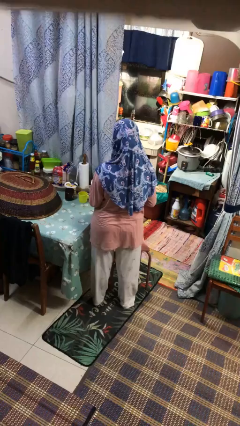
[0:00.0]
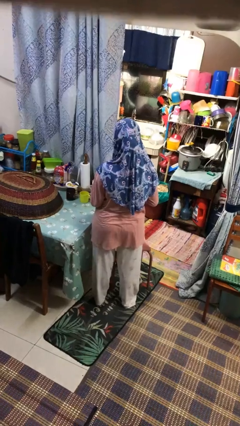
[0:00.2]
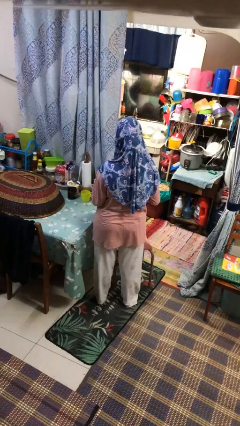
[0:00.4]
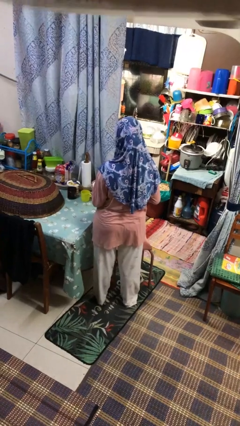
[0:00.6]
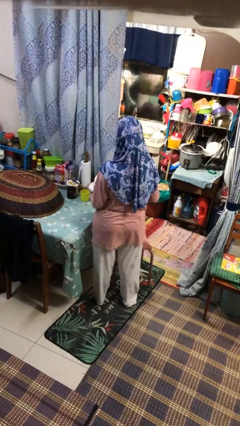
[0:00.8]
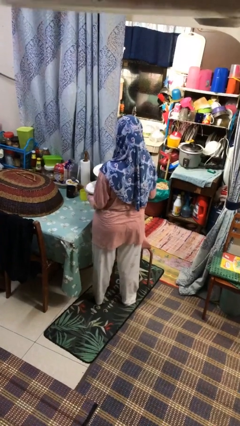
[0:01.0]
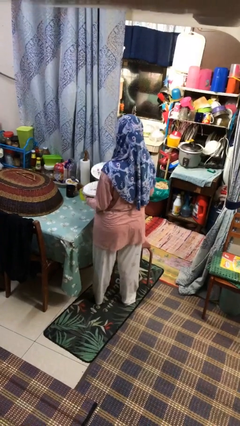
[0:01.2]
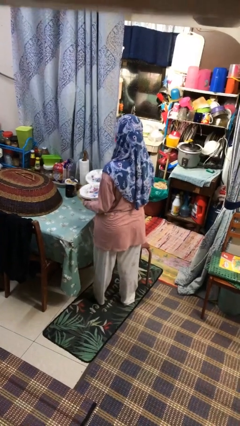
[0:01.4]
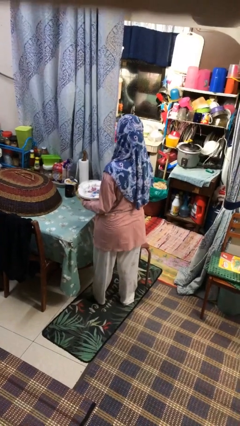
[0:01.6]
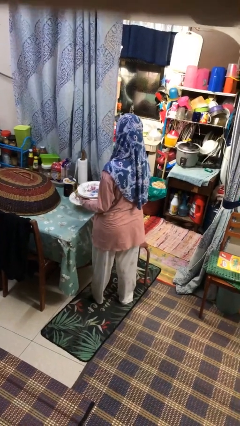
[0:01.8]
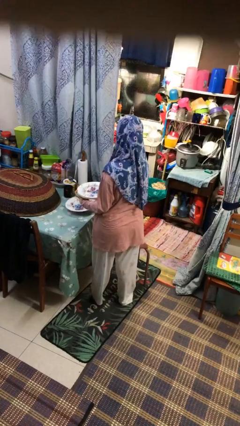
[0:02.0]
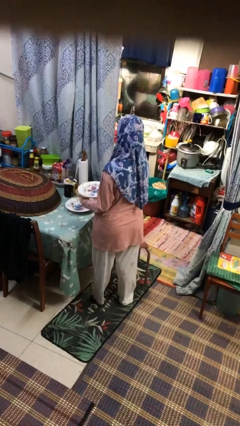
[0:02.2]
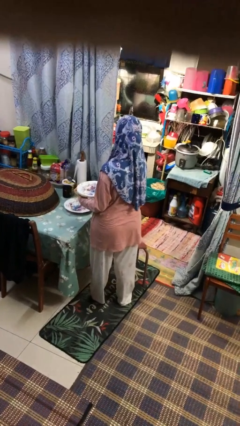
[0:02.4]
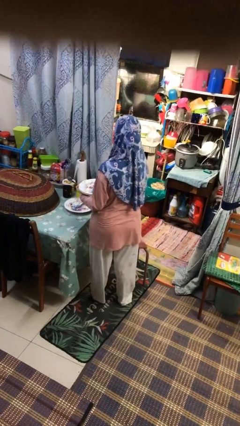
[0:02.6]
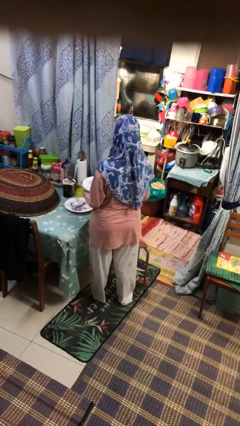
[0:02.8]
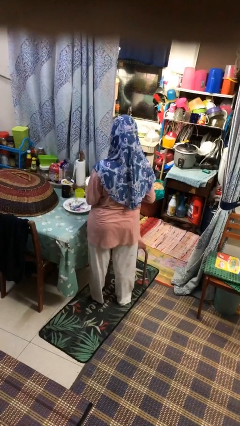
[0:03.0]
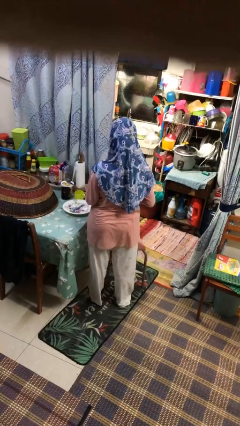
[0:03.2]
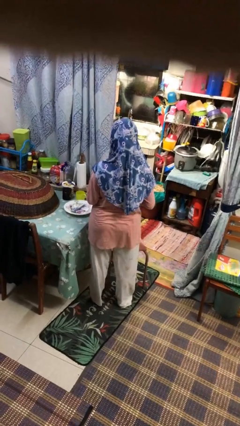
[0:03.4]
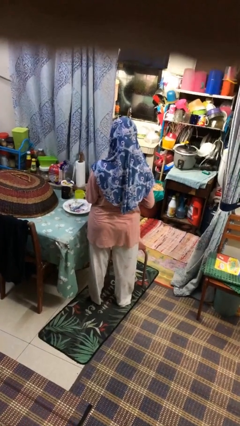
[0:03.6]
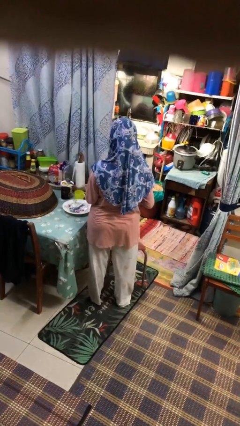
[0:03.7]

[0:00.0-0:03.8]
person sets table

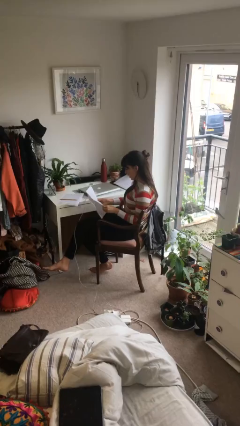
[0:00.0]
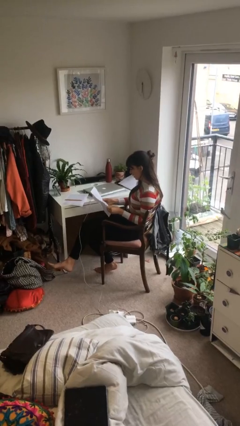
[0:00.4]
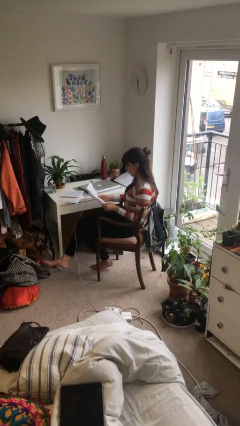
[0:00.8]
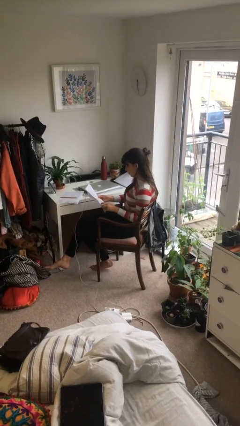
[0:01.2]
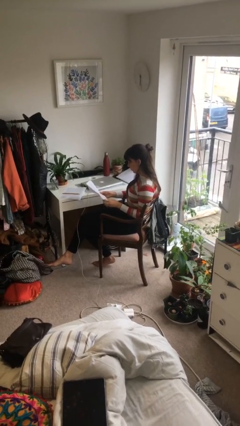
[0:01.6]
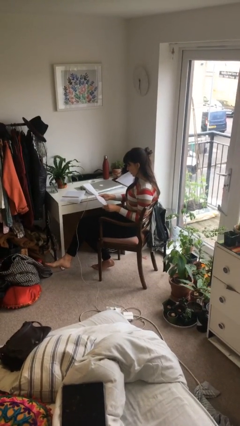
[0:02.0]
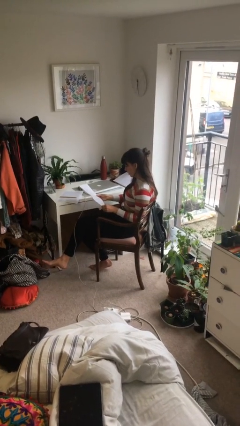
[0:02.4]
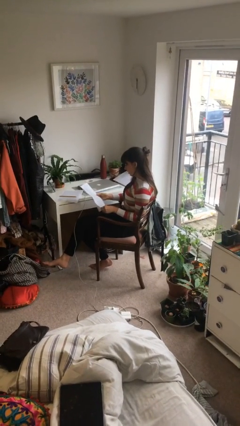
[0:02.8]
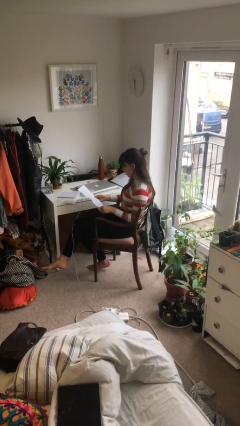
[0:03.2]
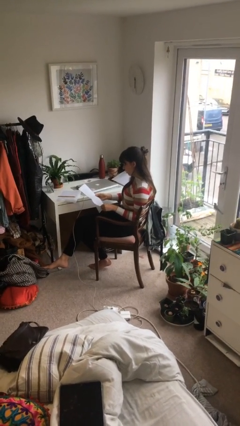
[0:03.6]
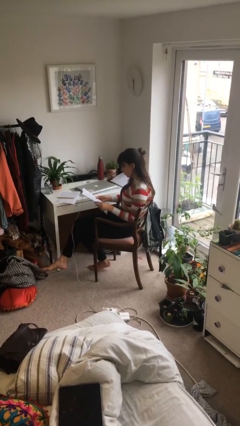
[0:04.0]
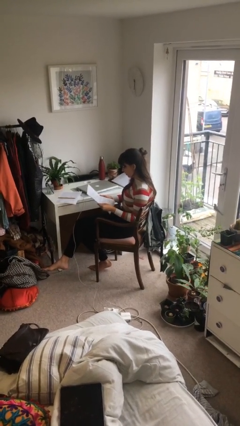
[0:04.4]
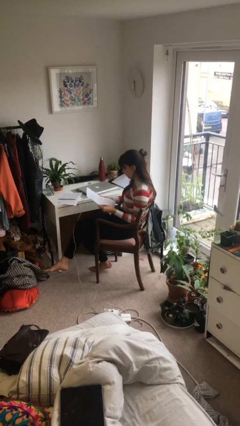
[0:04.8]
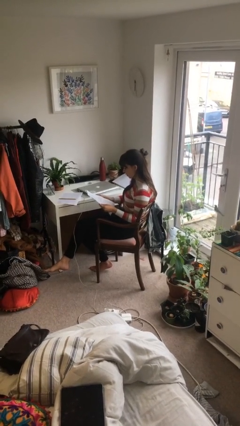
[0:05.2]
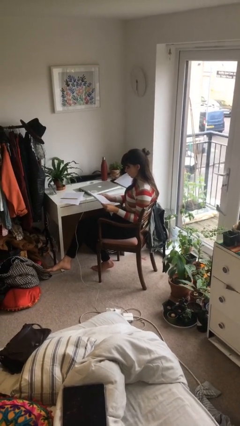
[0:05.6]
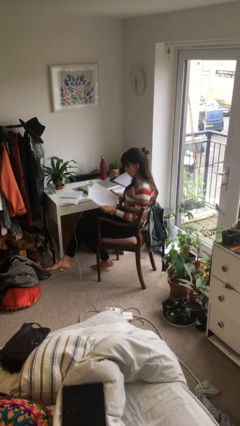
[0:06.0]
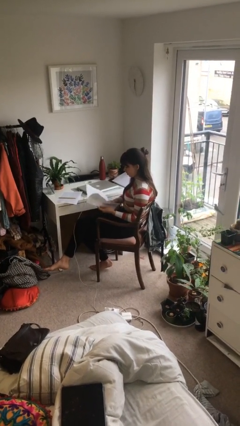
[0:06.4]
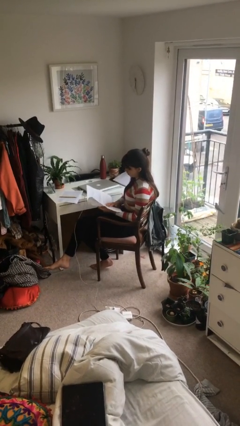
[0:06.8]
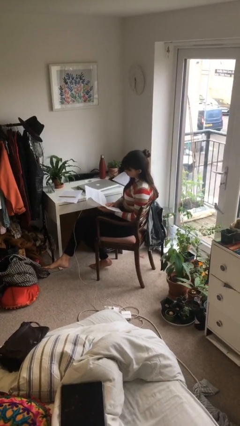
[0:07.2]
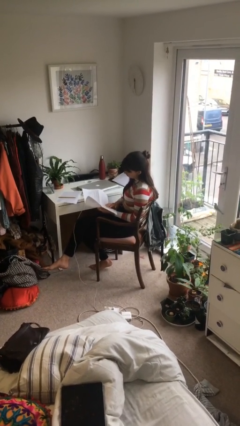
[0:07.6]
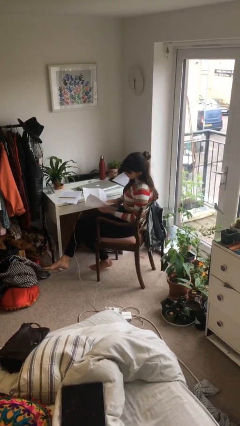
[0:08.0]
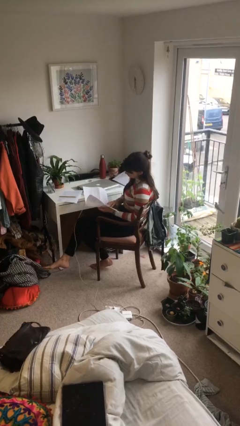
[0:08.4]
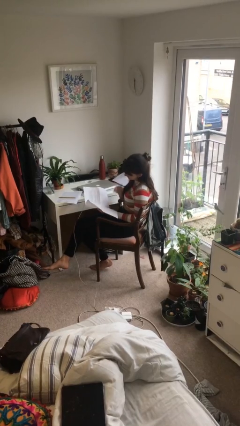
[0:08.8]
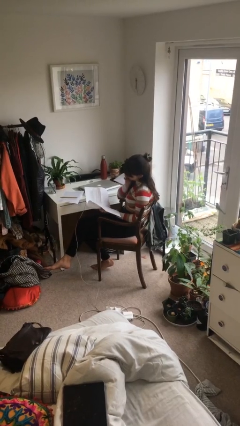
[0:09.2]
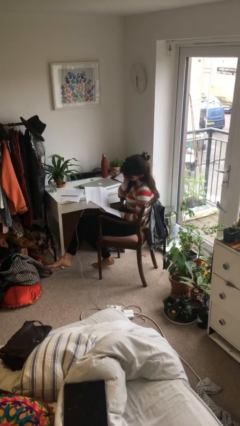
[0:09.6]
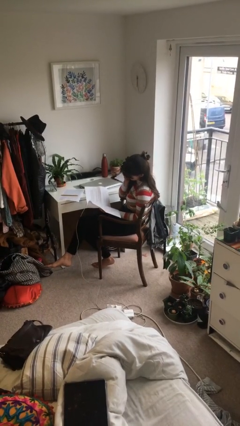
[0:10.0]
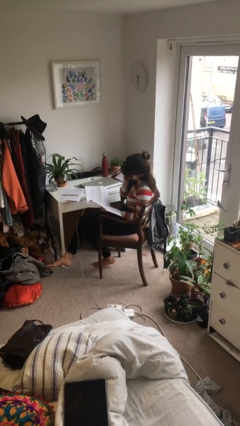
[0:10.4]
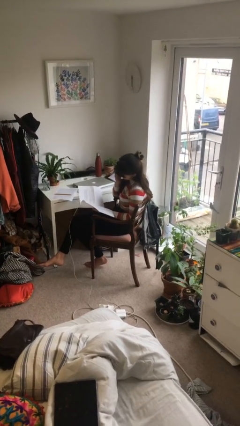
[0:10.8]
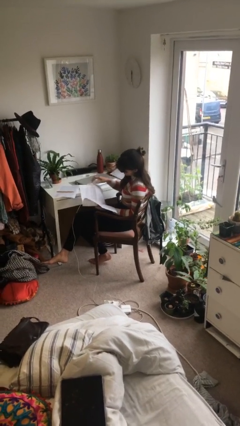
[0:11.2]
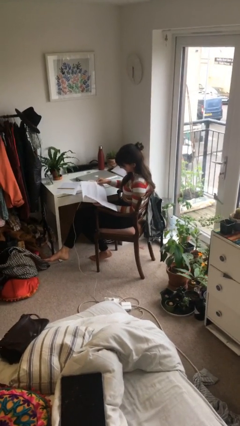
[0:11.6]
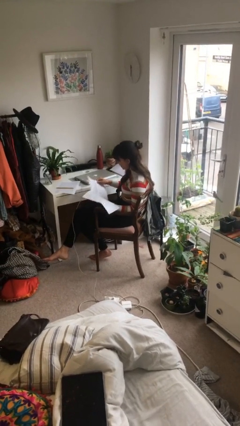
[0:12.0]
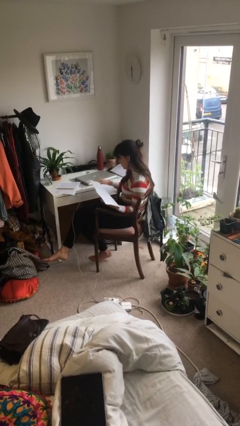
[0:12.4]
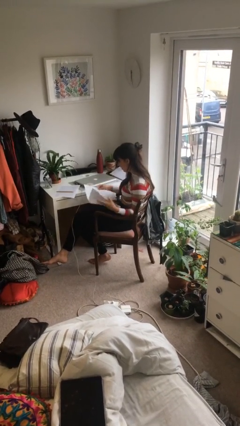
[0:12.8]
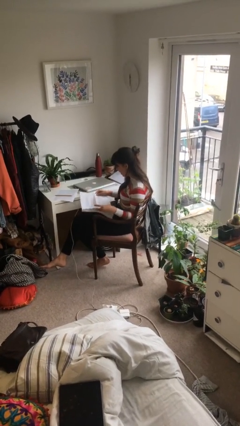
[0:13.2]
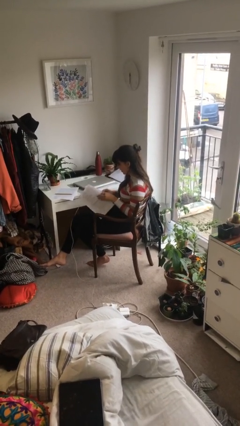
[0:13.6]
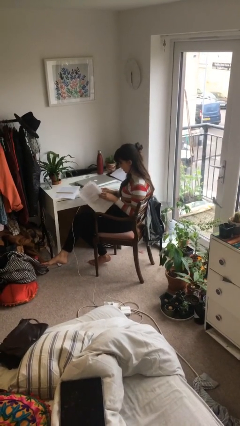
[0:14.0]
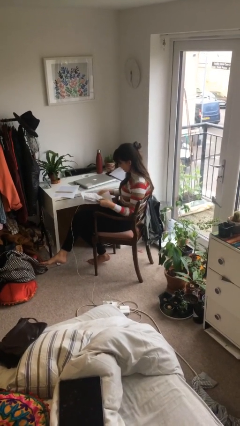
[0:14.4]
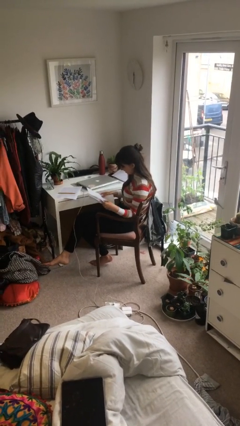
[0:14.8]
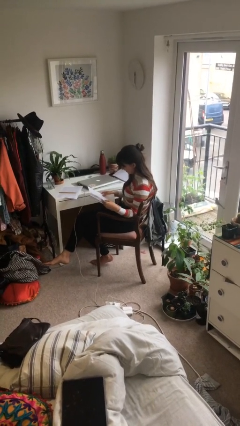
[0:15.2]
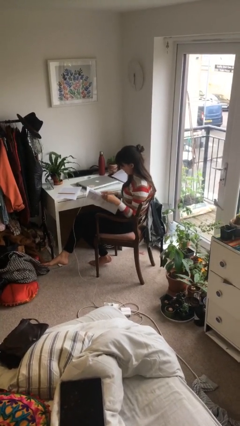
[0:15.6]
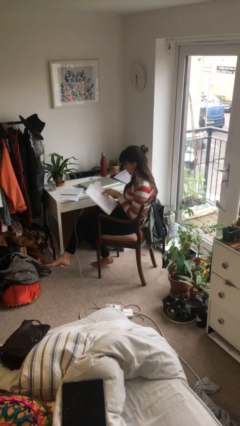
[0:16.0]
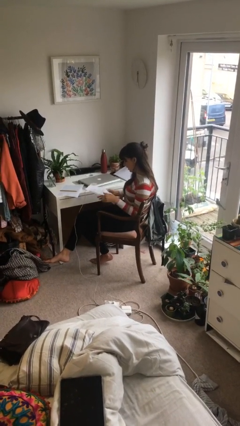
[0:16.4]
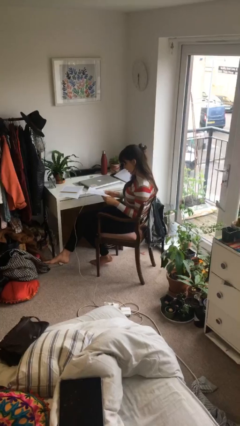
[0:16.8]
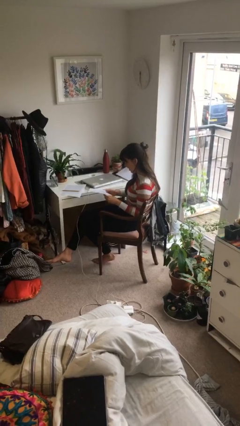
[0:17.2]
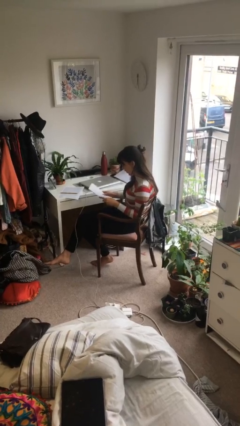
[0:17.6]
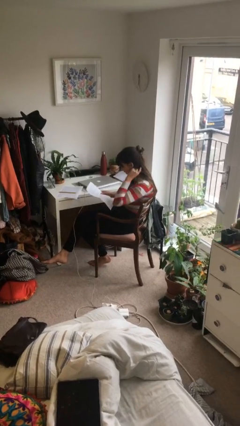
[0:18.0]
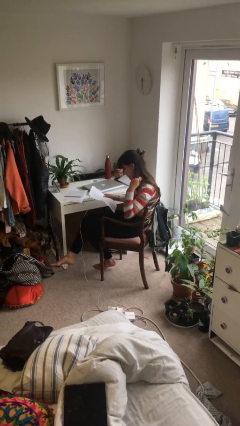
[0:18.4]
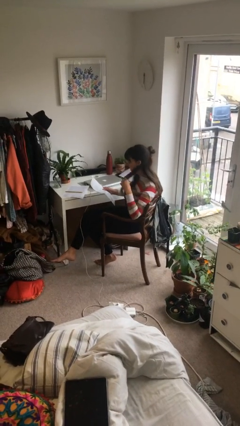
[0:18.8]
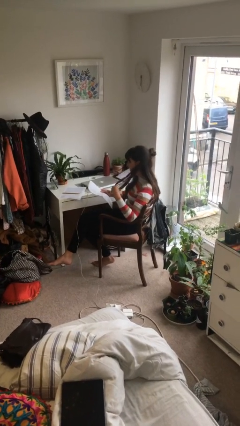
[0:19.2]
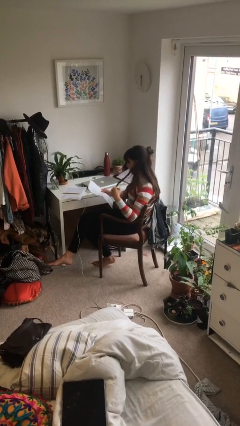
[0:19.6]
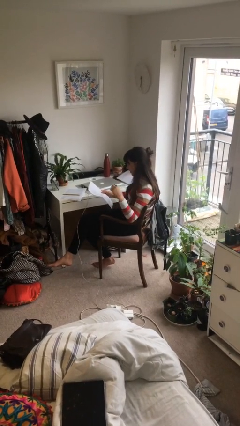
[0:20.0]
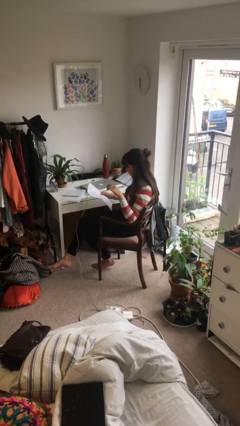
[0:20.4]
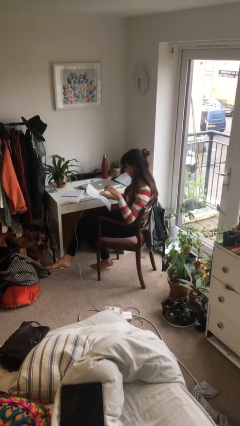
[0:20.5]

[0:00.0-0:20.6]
person reads document

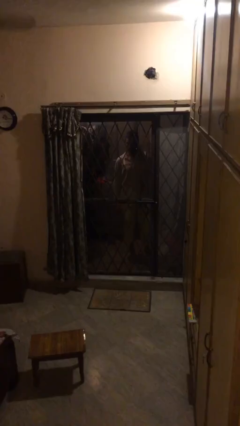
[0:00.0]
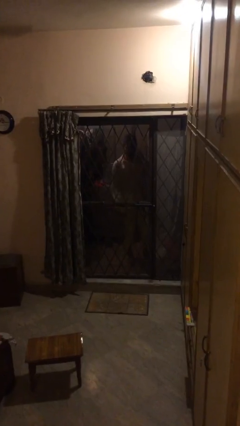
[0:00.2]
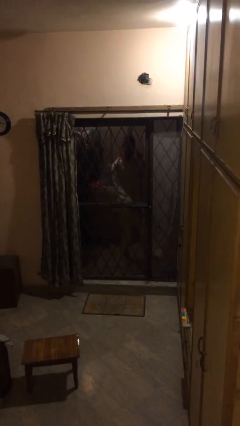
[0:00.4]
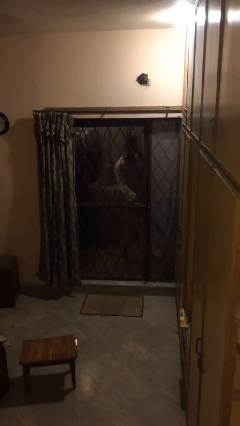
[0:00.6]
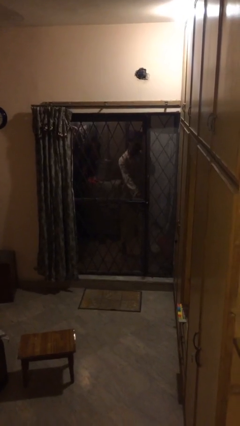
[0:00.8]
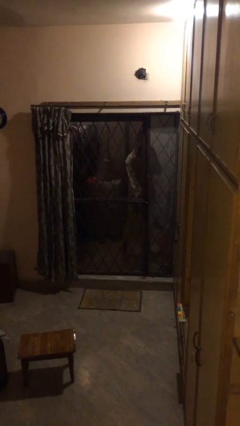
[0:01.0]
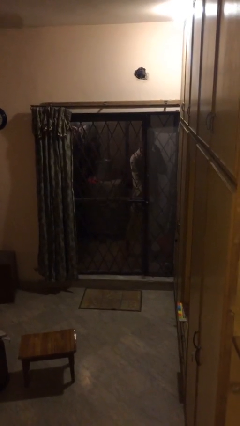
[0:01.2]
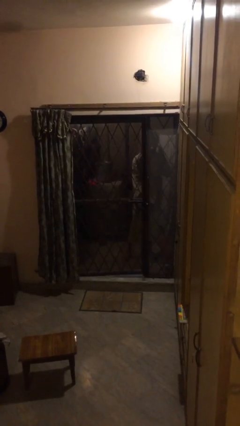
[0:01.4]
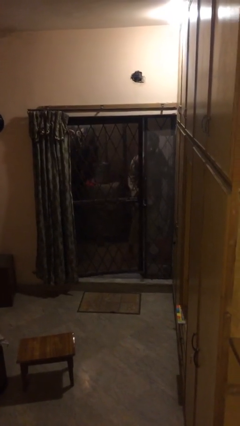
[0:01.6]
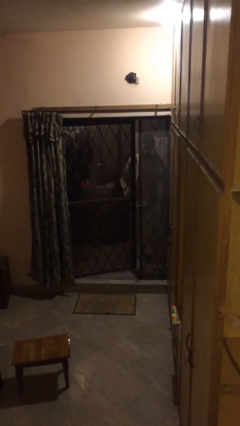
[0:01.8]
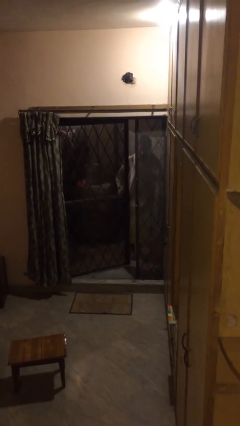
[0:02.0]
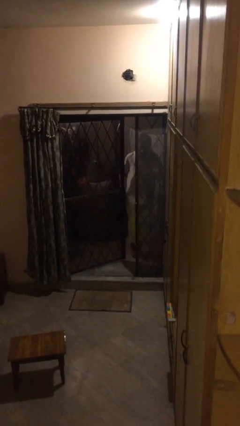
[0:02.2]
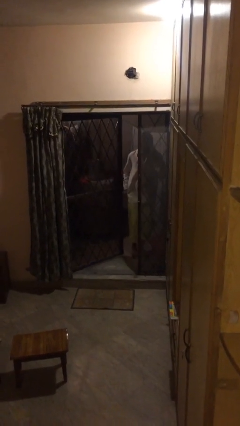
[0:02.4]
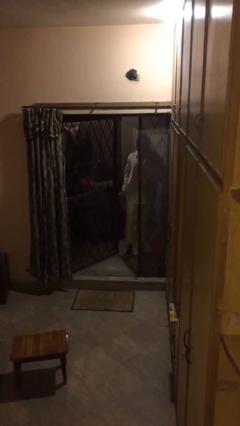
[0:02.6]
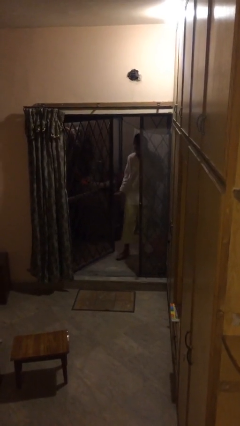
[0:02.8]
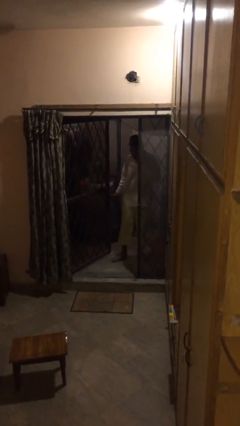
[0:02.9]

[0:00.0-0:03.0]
person opens facility door

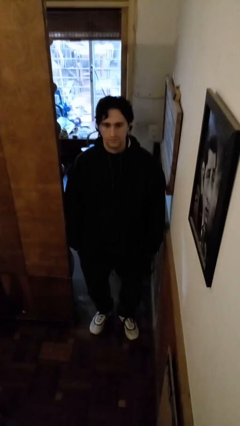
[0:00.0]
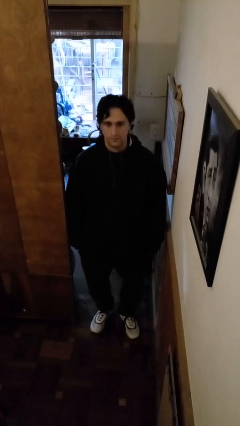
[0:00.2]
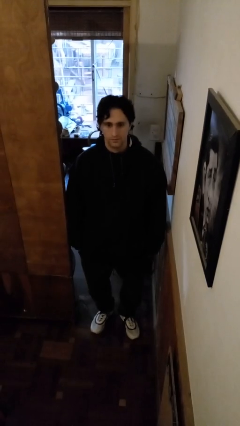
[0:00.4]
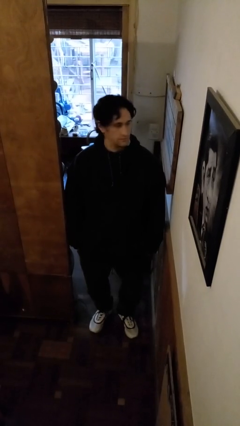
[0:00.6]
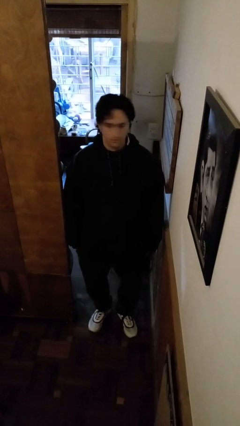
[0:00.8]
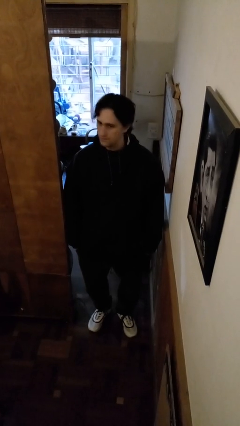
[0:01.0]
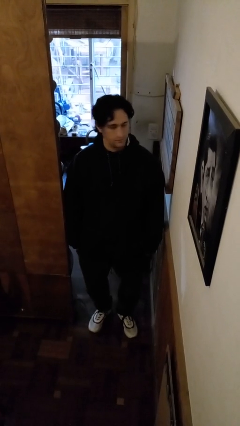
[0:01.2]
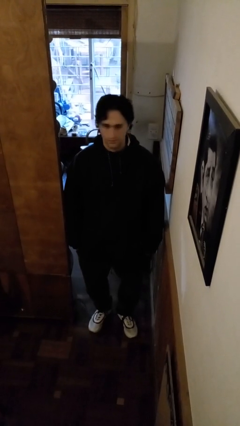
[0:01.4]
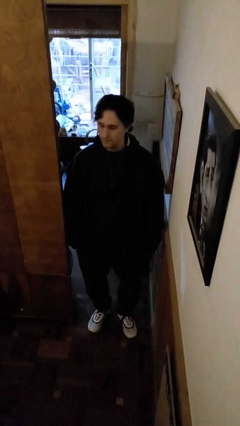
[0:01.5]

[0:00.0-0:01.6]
person shakes head
